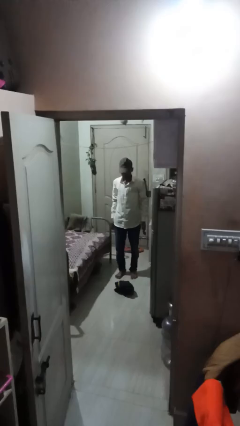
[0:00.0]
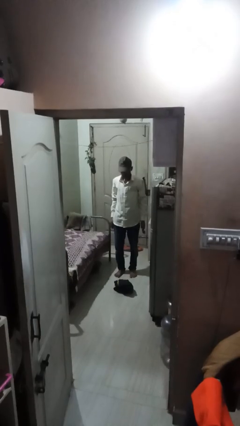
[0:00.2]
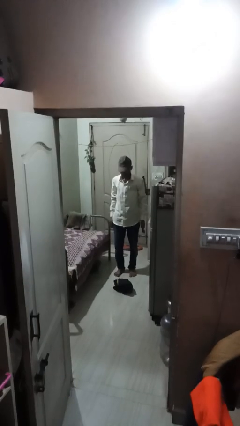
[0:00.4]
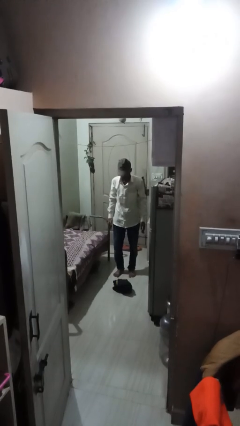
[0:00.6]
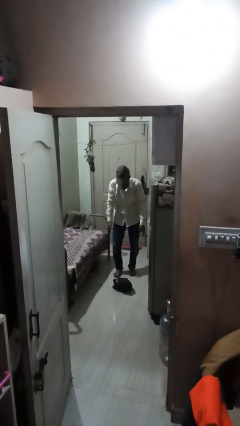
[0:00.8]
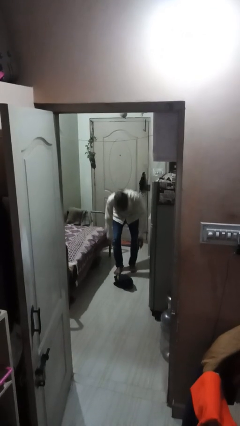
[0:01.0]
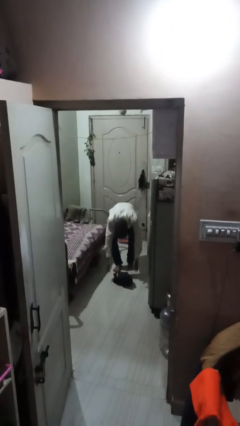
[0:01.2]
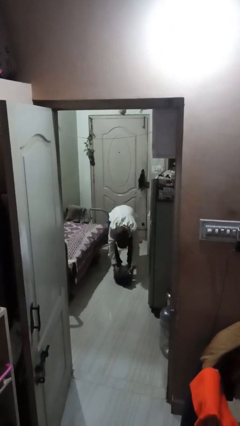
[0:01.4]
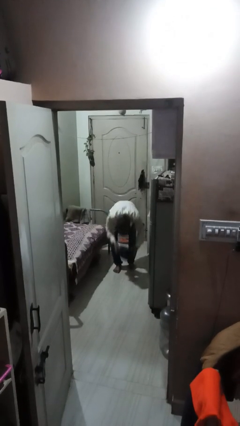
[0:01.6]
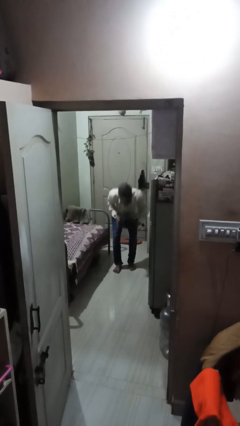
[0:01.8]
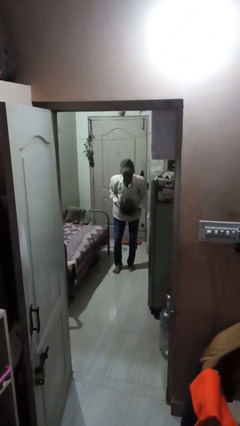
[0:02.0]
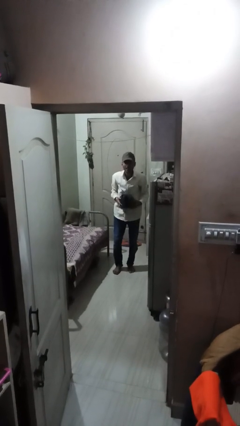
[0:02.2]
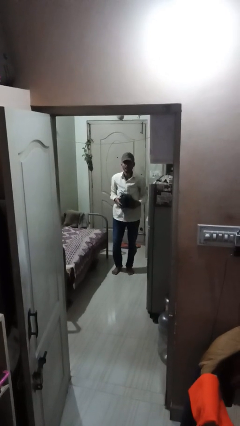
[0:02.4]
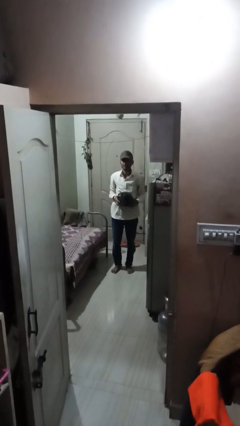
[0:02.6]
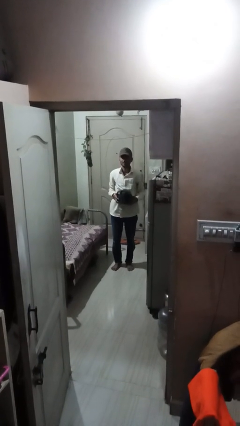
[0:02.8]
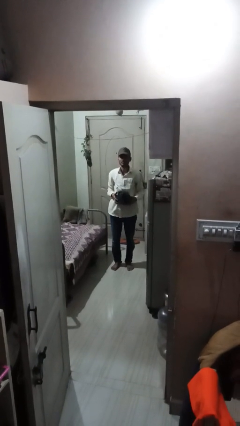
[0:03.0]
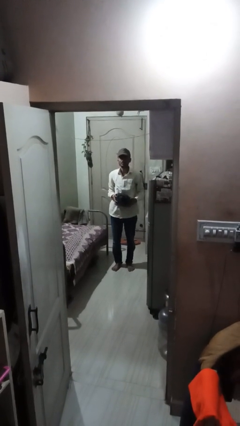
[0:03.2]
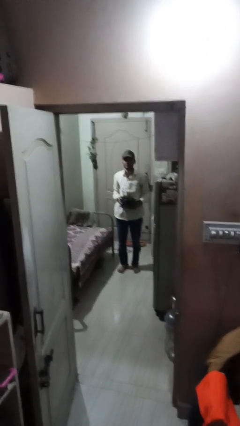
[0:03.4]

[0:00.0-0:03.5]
person picks up object from floor

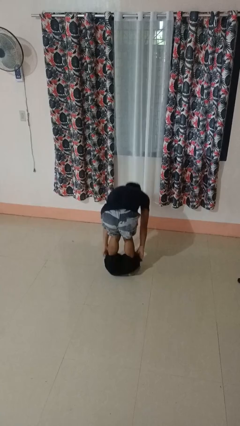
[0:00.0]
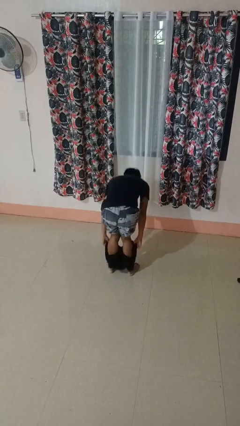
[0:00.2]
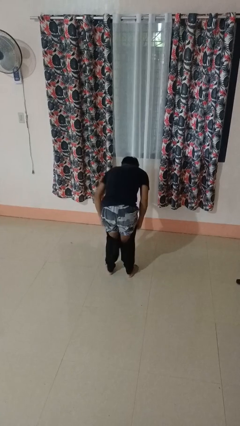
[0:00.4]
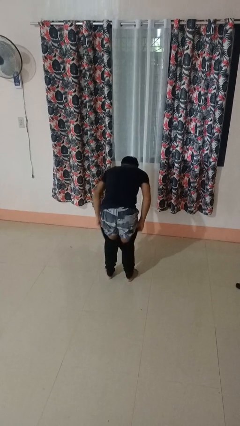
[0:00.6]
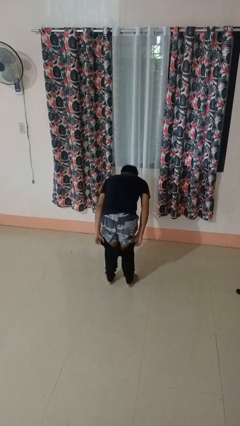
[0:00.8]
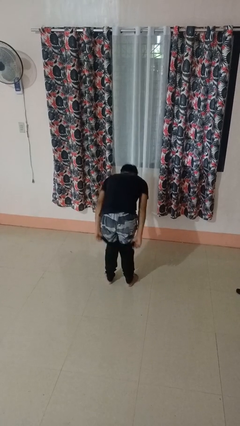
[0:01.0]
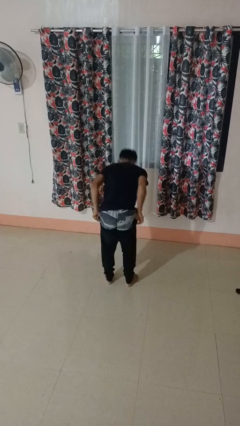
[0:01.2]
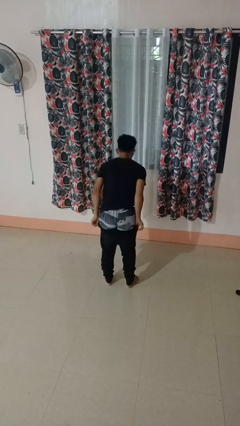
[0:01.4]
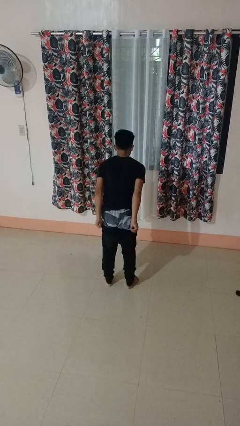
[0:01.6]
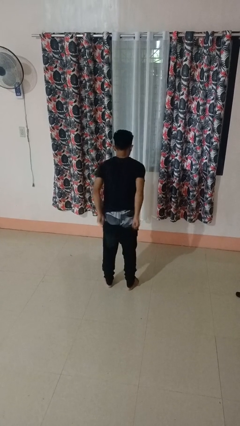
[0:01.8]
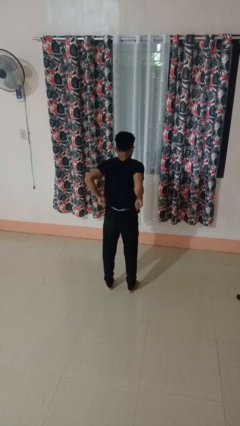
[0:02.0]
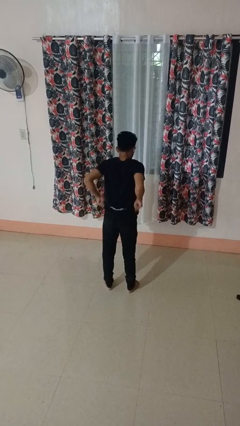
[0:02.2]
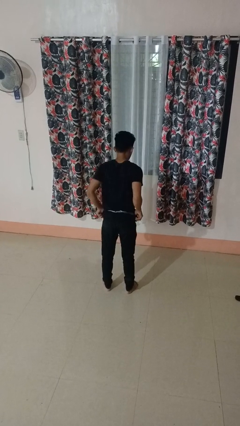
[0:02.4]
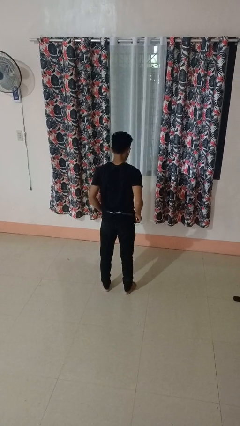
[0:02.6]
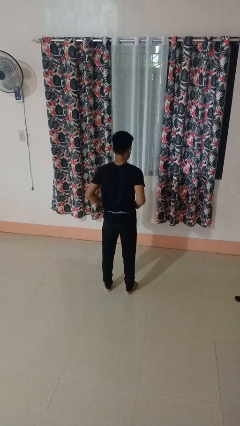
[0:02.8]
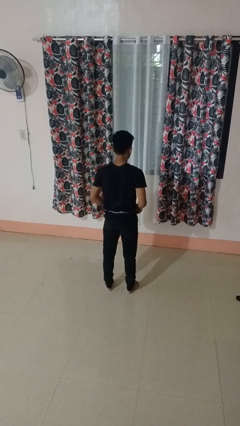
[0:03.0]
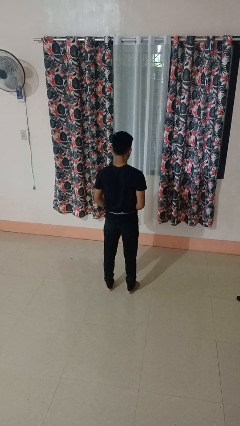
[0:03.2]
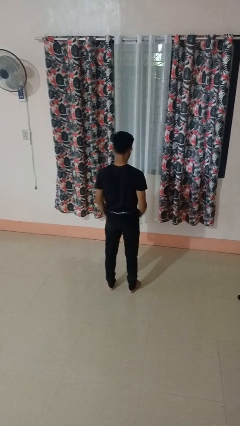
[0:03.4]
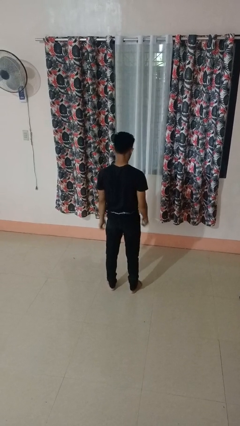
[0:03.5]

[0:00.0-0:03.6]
person puts on pants

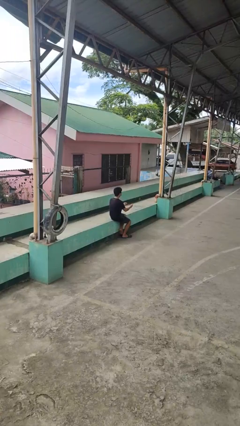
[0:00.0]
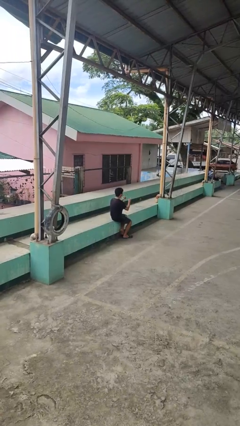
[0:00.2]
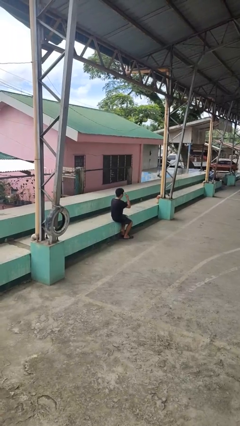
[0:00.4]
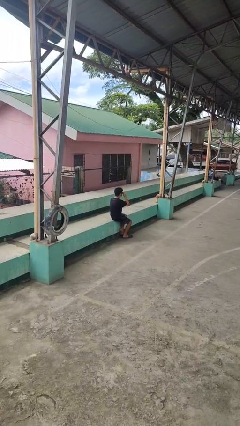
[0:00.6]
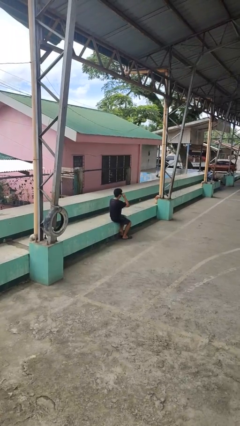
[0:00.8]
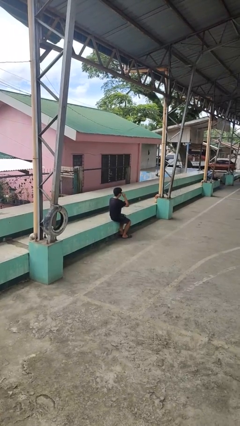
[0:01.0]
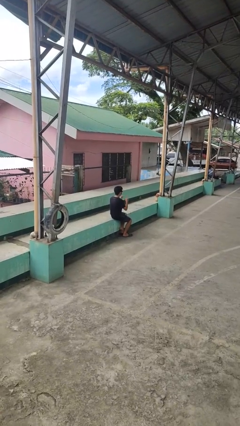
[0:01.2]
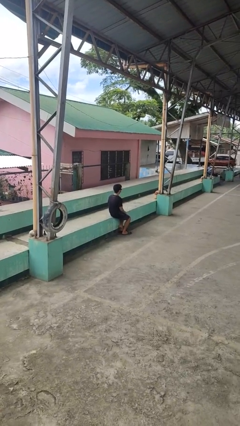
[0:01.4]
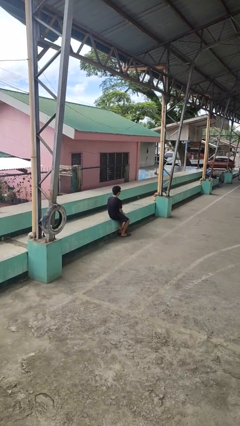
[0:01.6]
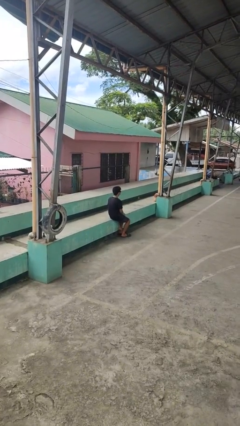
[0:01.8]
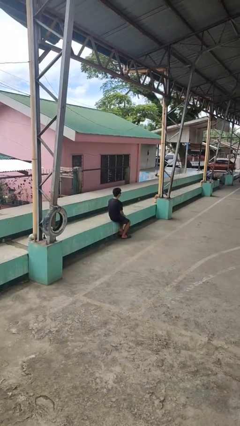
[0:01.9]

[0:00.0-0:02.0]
person puts on sunglasses

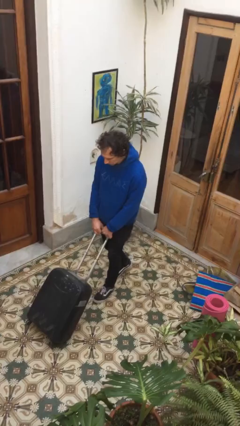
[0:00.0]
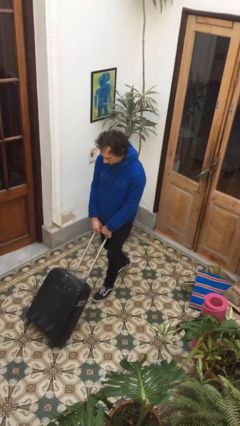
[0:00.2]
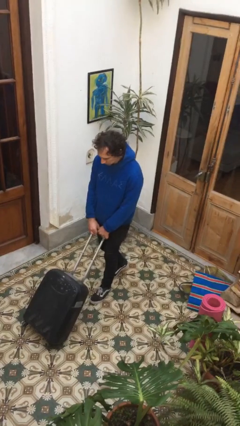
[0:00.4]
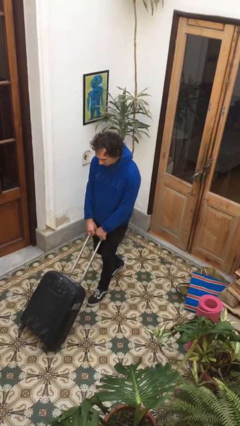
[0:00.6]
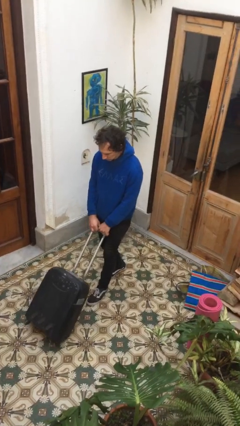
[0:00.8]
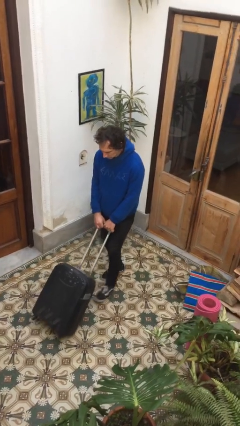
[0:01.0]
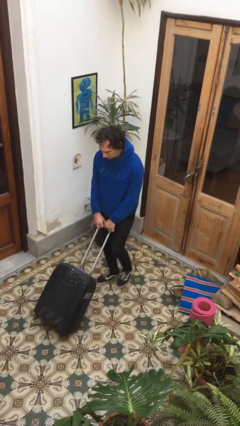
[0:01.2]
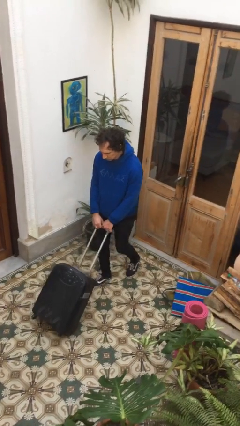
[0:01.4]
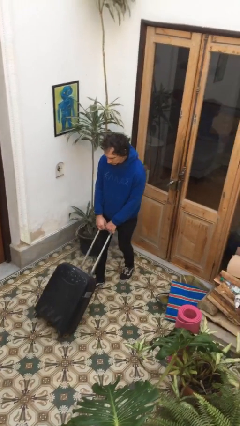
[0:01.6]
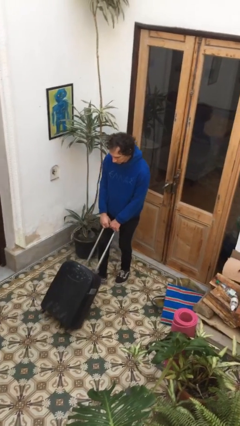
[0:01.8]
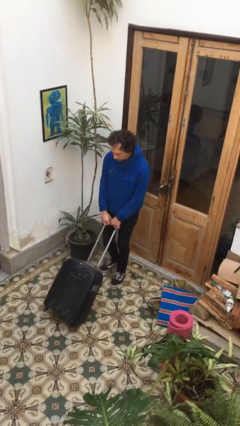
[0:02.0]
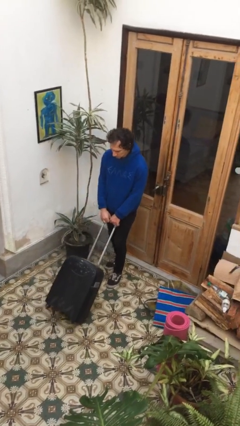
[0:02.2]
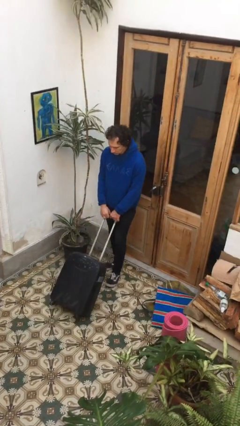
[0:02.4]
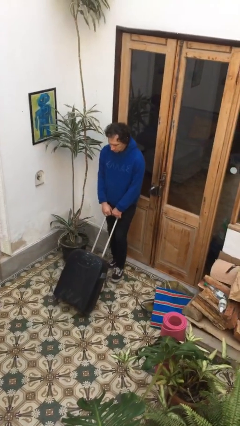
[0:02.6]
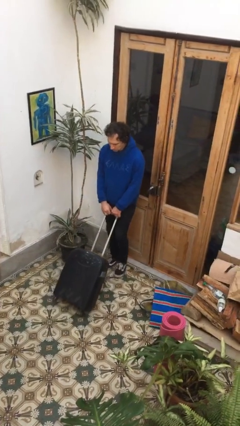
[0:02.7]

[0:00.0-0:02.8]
person pulls wheeled cart

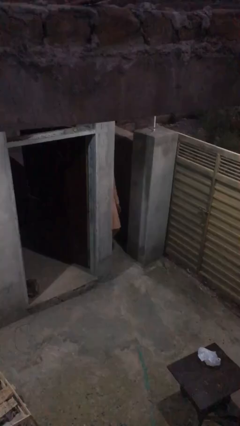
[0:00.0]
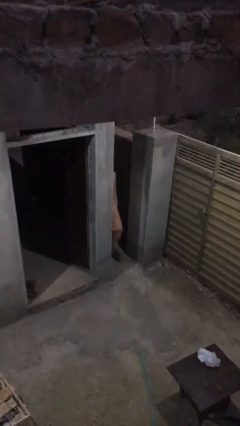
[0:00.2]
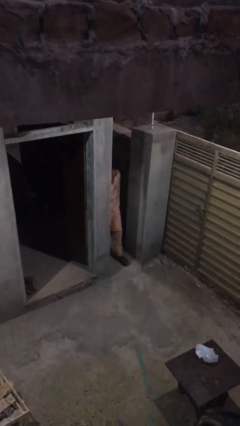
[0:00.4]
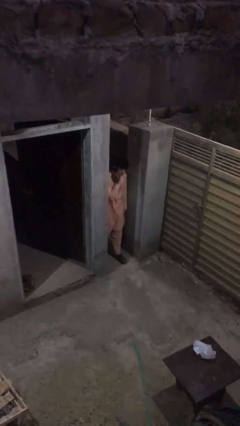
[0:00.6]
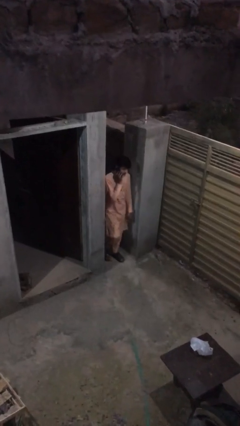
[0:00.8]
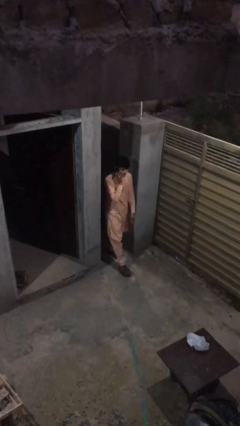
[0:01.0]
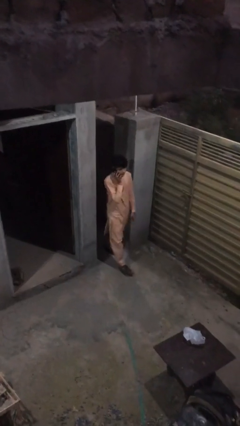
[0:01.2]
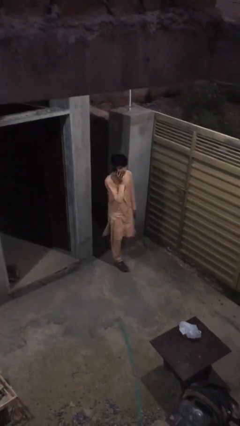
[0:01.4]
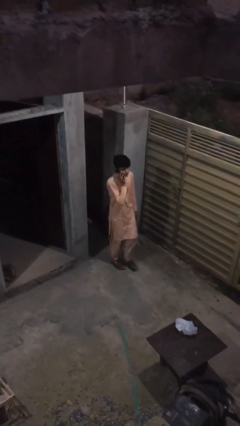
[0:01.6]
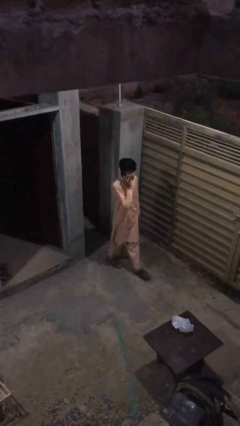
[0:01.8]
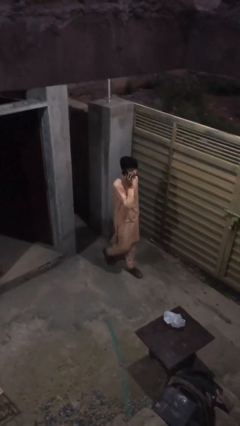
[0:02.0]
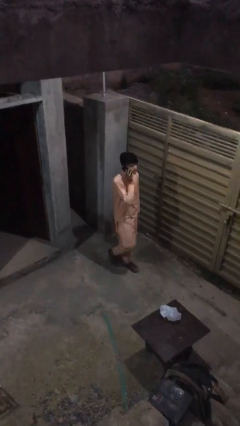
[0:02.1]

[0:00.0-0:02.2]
person enters scene through structure

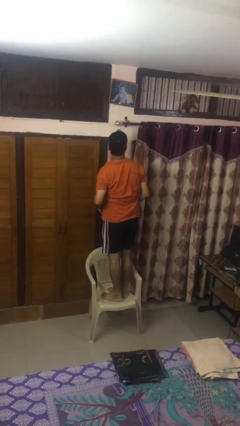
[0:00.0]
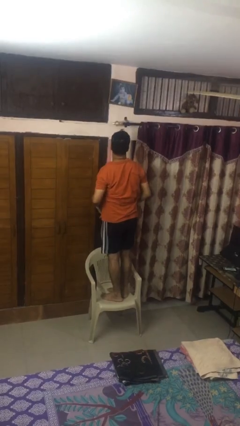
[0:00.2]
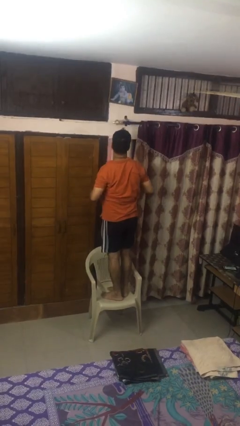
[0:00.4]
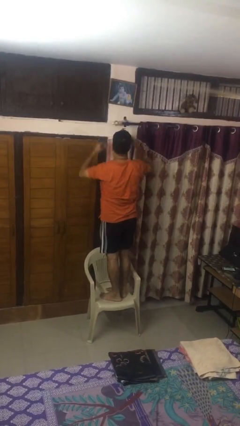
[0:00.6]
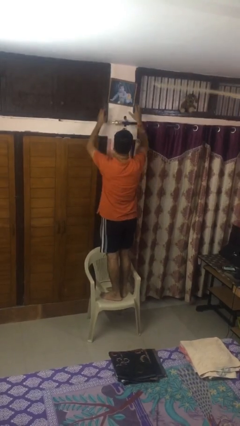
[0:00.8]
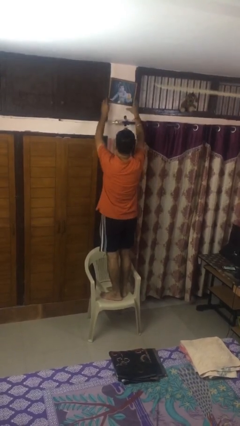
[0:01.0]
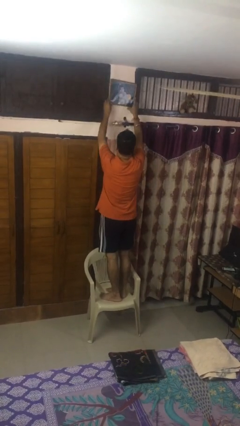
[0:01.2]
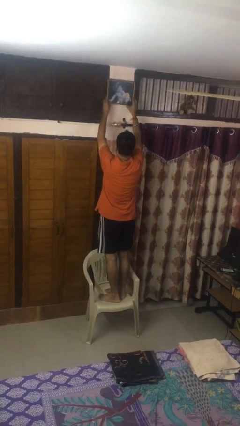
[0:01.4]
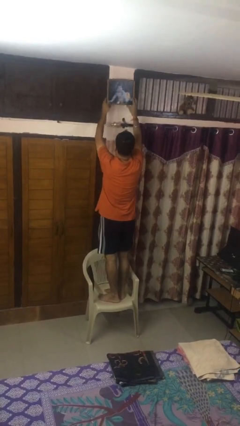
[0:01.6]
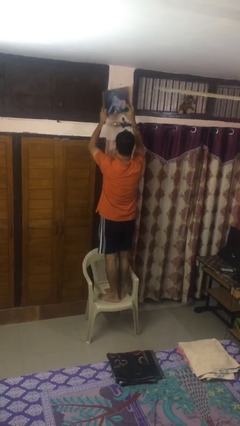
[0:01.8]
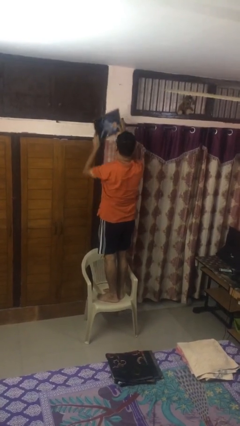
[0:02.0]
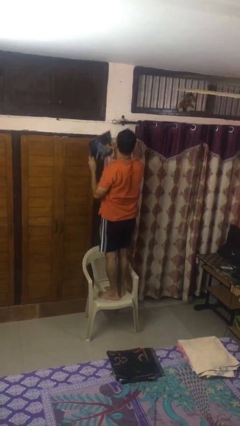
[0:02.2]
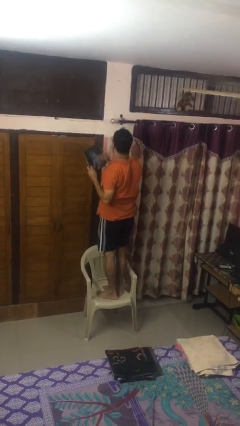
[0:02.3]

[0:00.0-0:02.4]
person takes down picture frame

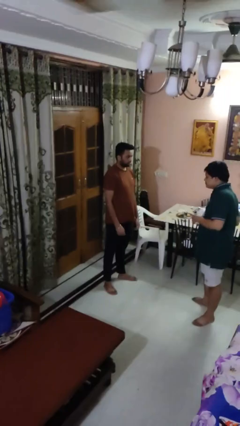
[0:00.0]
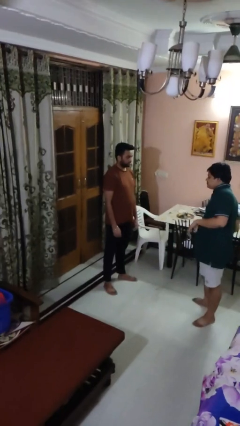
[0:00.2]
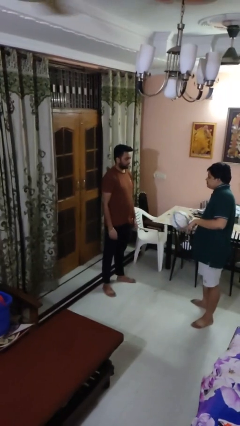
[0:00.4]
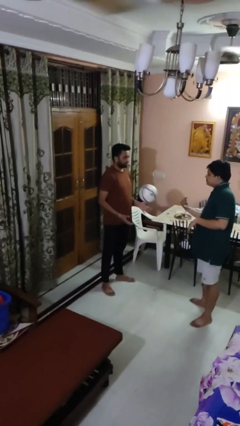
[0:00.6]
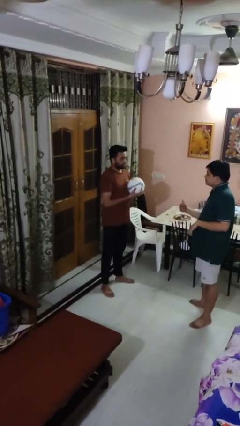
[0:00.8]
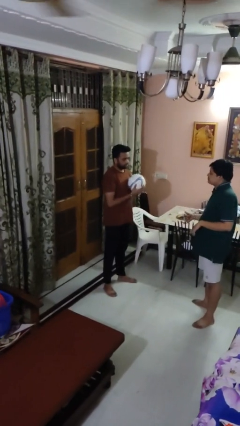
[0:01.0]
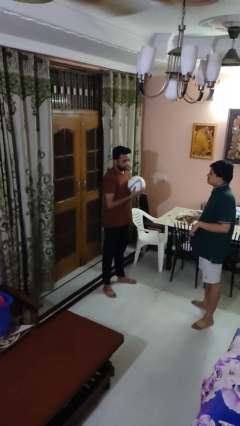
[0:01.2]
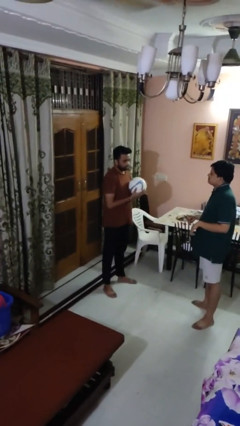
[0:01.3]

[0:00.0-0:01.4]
person catches object from person
